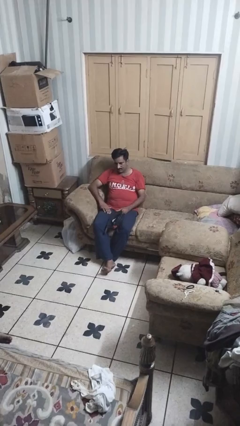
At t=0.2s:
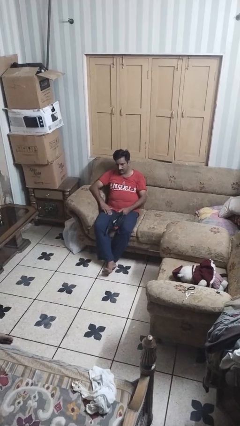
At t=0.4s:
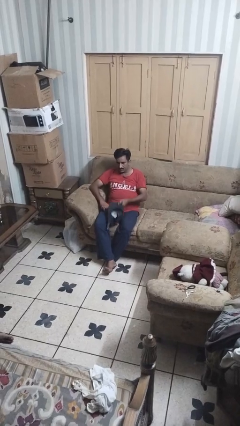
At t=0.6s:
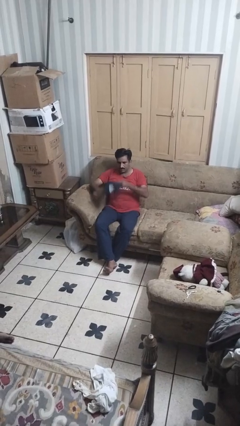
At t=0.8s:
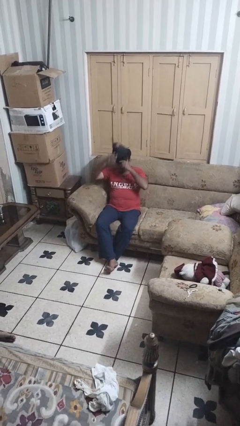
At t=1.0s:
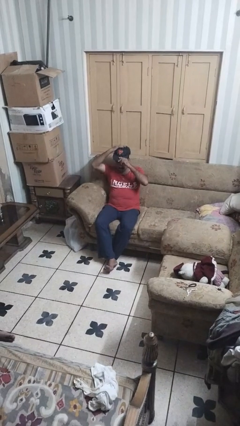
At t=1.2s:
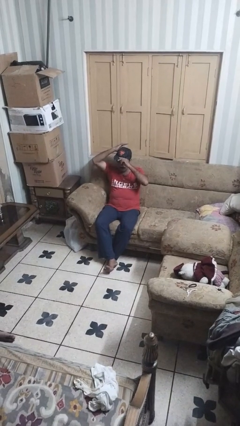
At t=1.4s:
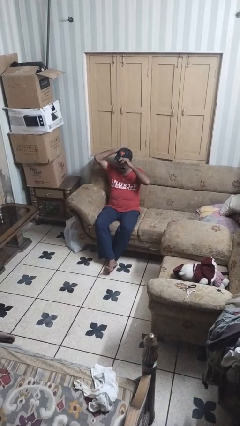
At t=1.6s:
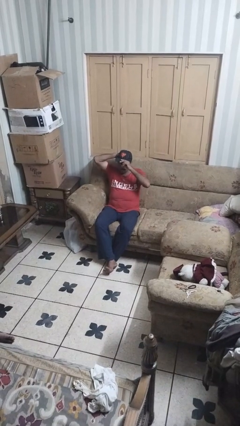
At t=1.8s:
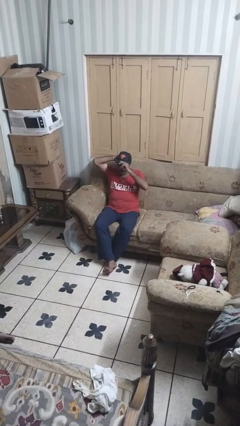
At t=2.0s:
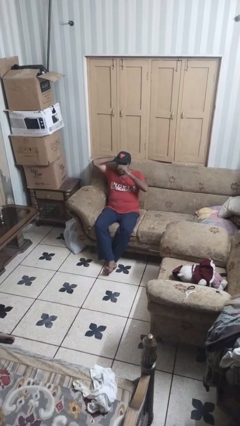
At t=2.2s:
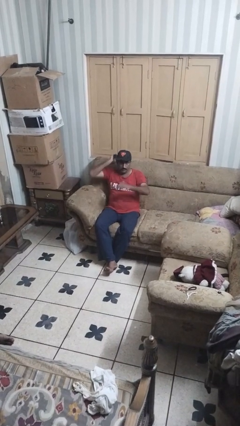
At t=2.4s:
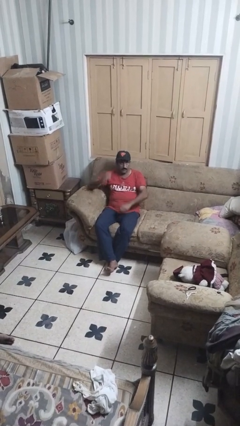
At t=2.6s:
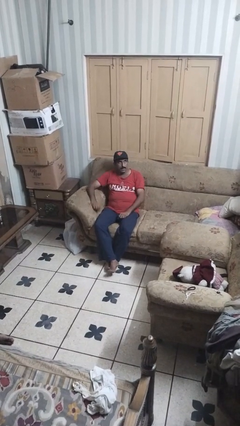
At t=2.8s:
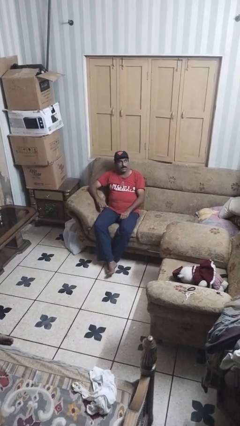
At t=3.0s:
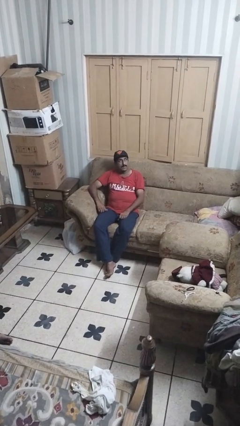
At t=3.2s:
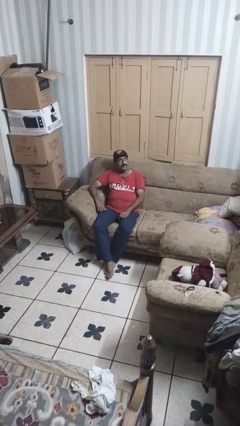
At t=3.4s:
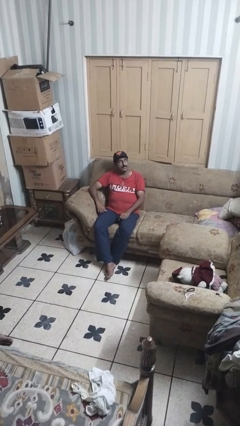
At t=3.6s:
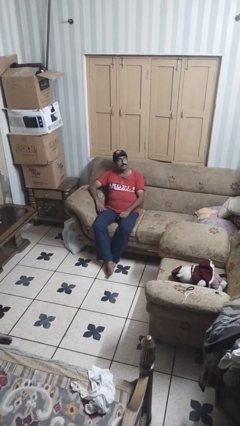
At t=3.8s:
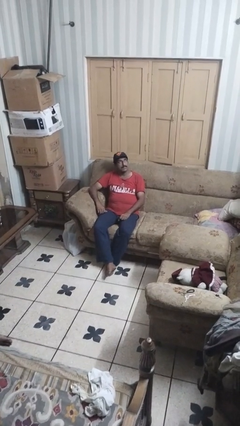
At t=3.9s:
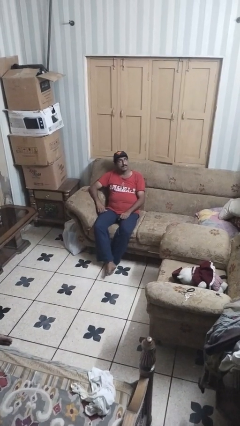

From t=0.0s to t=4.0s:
person puts on hat

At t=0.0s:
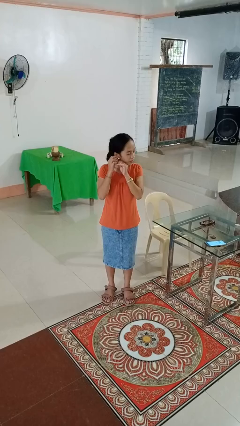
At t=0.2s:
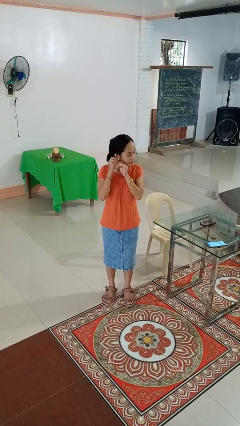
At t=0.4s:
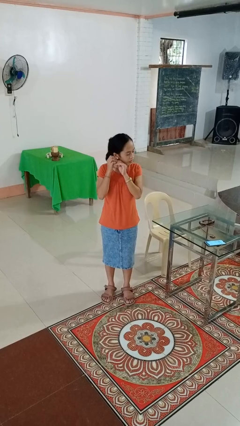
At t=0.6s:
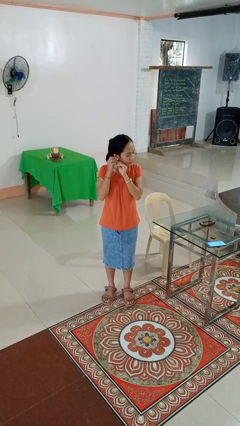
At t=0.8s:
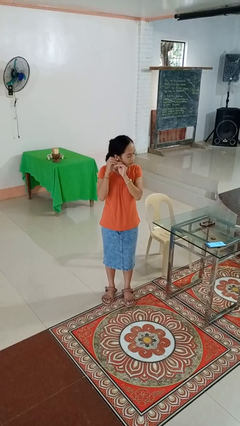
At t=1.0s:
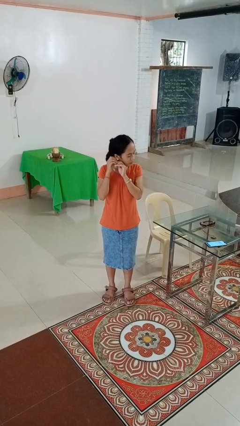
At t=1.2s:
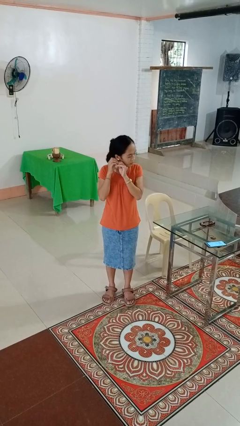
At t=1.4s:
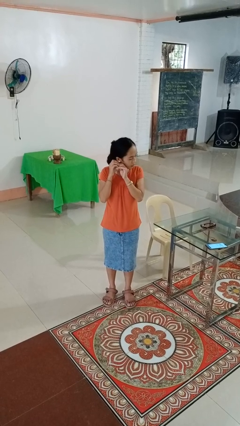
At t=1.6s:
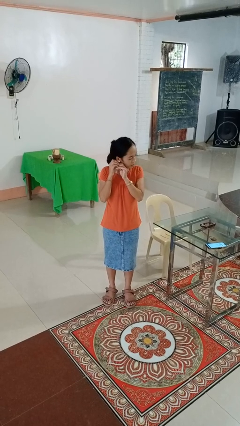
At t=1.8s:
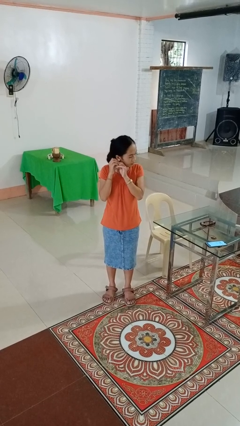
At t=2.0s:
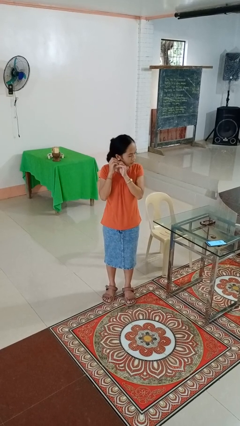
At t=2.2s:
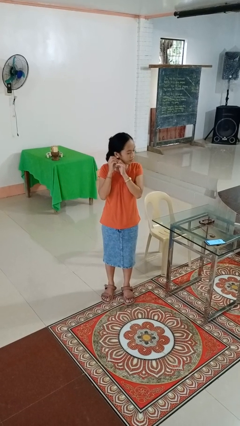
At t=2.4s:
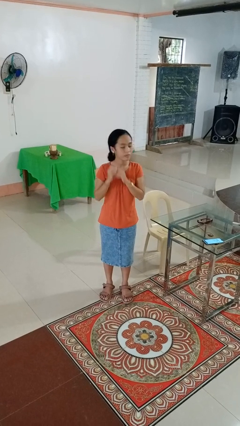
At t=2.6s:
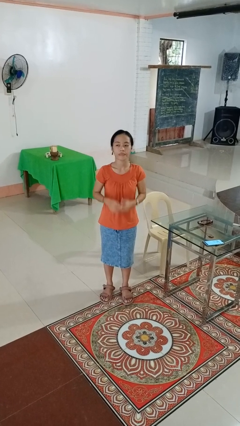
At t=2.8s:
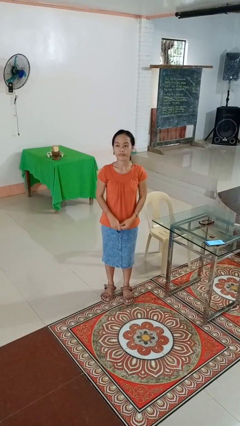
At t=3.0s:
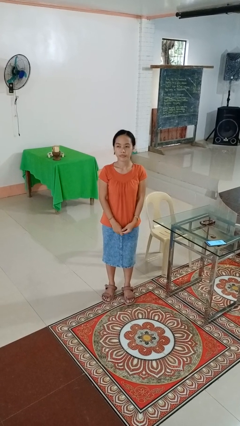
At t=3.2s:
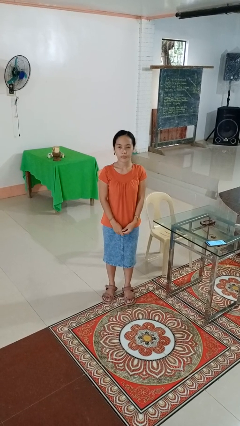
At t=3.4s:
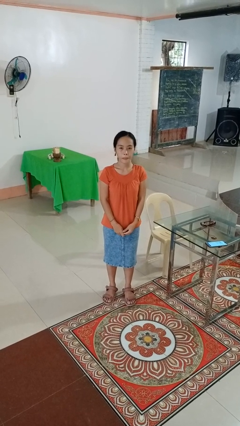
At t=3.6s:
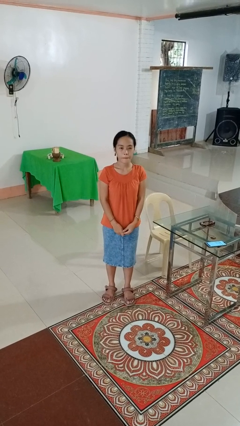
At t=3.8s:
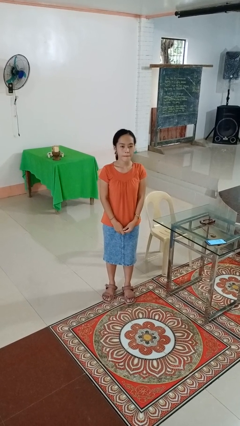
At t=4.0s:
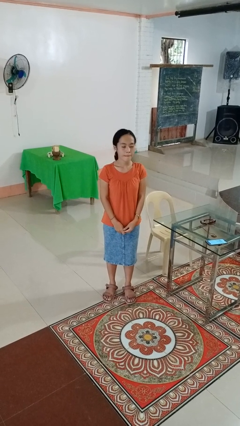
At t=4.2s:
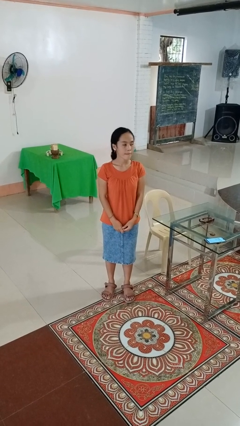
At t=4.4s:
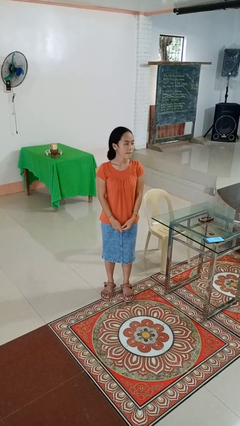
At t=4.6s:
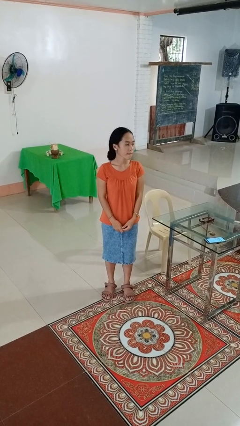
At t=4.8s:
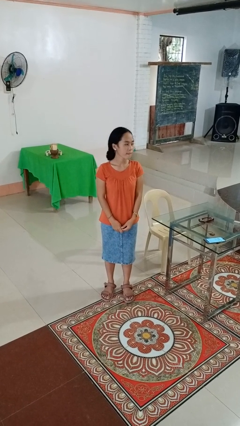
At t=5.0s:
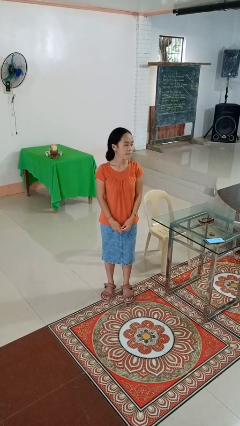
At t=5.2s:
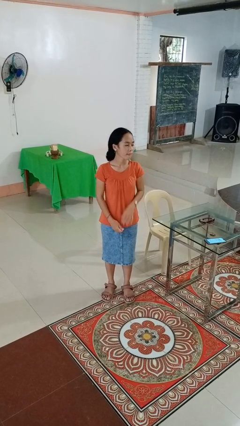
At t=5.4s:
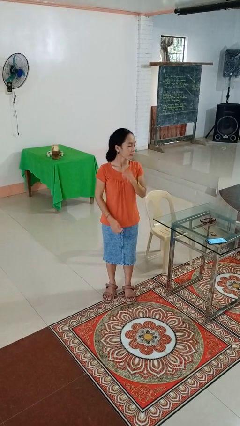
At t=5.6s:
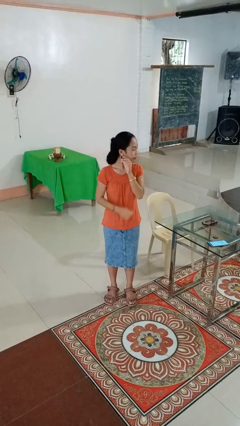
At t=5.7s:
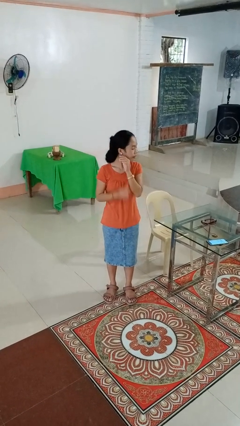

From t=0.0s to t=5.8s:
person puts on earrings

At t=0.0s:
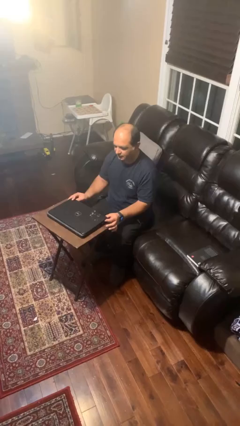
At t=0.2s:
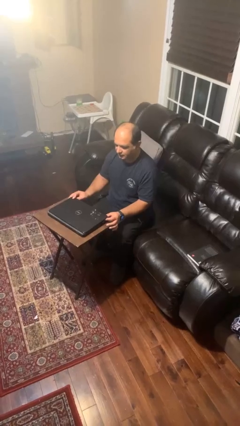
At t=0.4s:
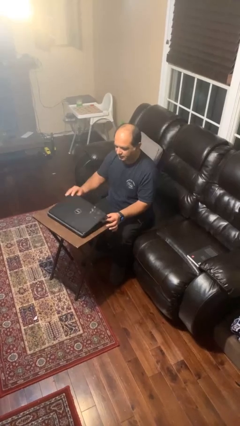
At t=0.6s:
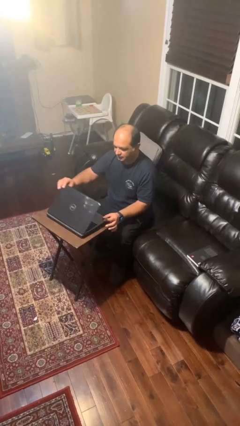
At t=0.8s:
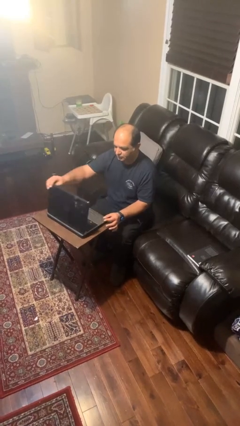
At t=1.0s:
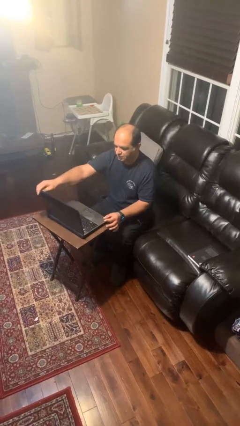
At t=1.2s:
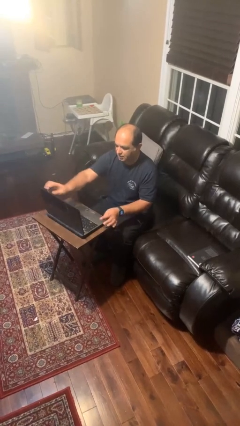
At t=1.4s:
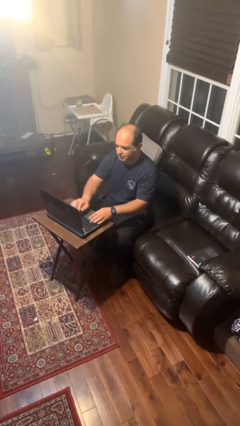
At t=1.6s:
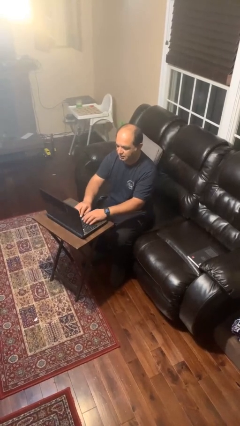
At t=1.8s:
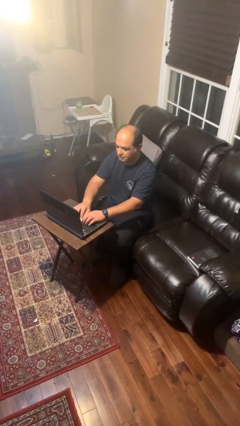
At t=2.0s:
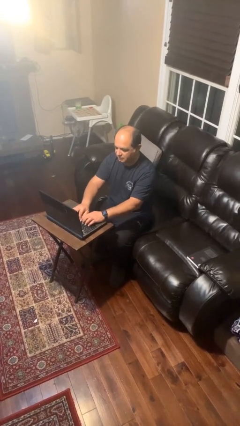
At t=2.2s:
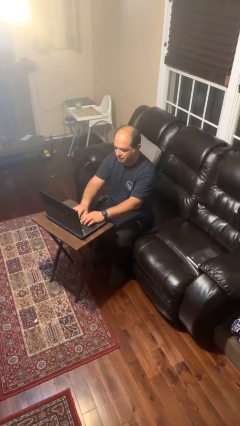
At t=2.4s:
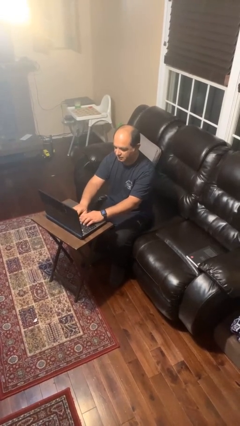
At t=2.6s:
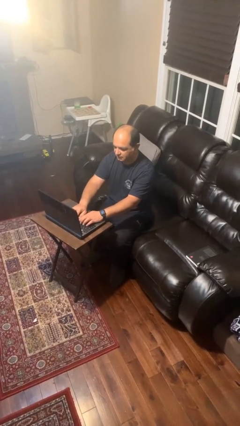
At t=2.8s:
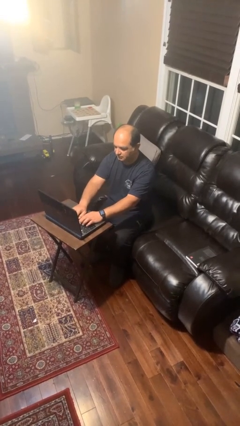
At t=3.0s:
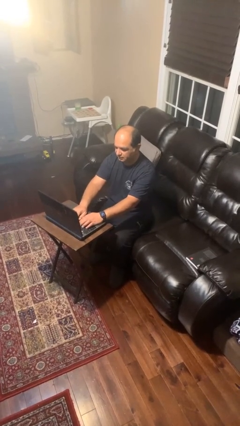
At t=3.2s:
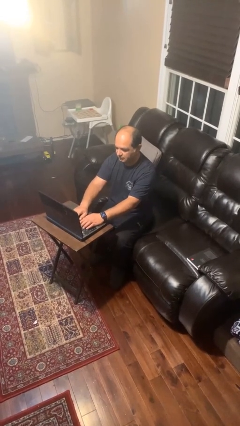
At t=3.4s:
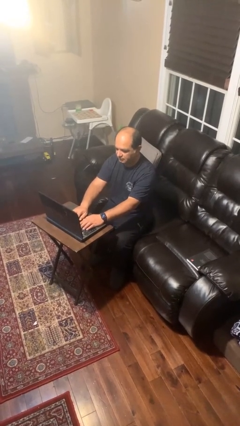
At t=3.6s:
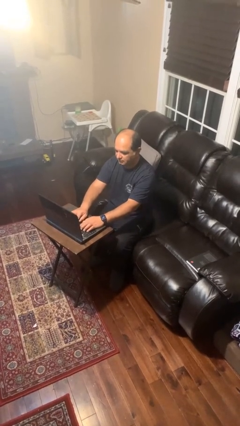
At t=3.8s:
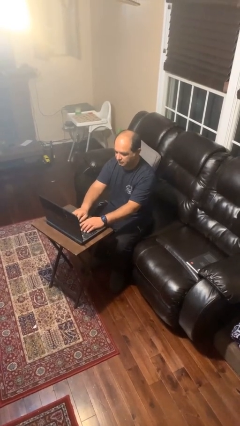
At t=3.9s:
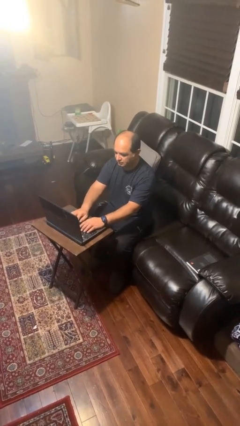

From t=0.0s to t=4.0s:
person interacts with laptop

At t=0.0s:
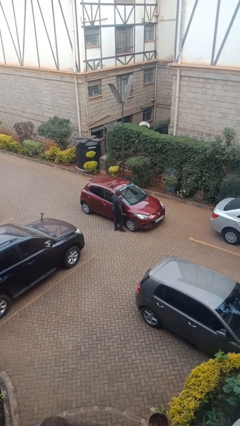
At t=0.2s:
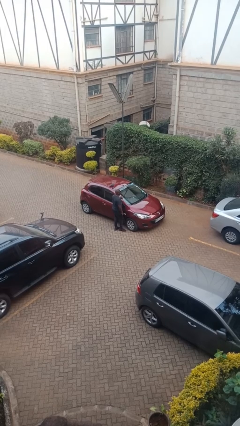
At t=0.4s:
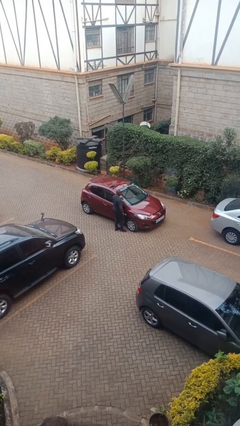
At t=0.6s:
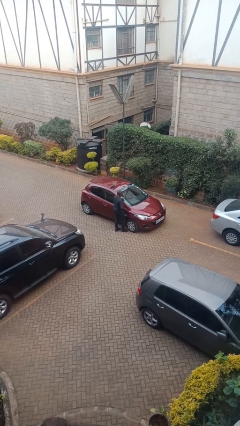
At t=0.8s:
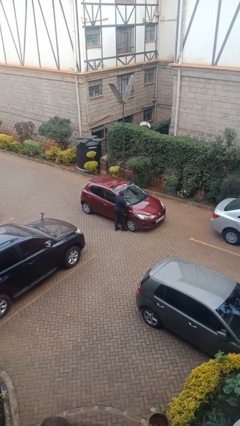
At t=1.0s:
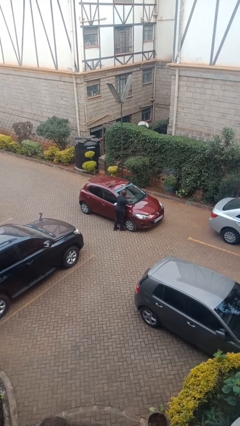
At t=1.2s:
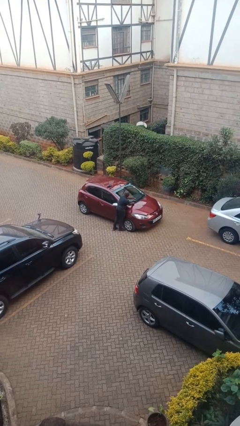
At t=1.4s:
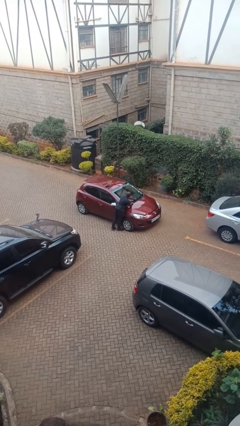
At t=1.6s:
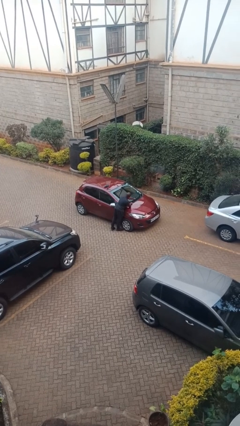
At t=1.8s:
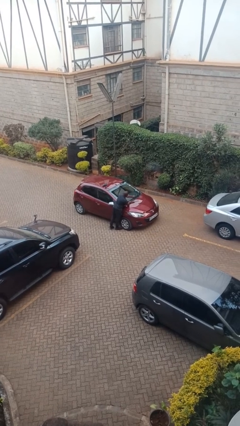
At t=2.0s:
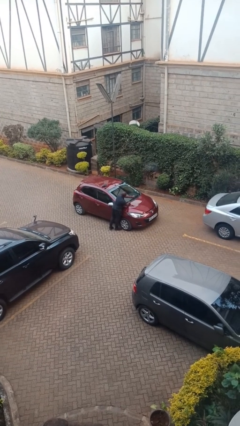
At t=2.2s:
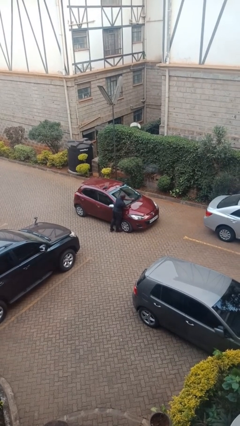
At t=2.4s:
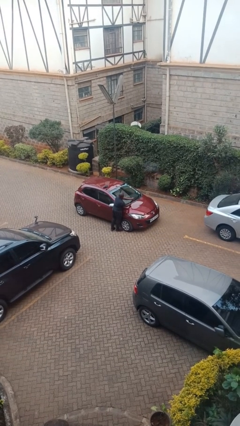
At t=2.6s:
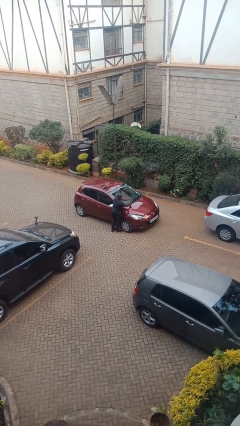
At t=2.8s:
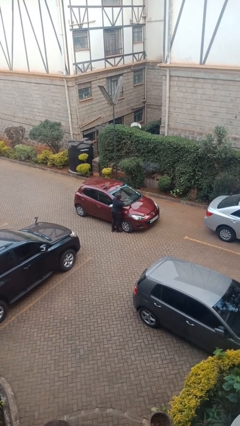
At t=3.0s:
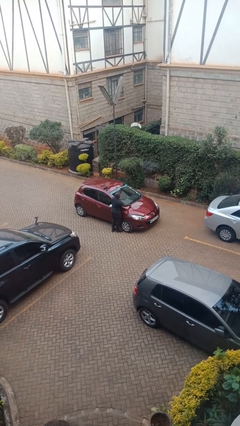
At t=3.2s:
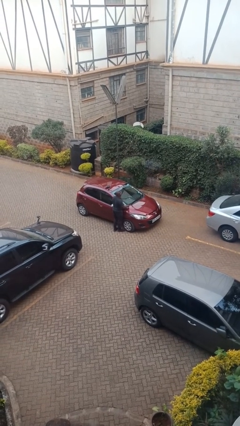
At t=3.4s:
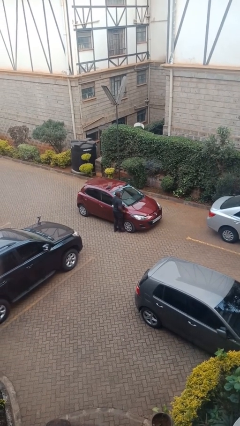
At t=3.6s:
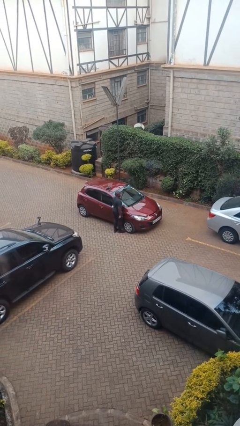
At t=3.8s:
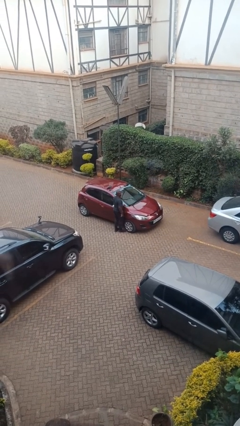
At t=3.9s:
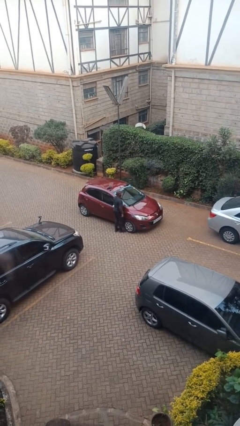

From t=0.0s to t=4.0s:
person flips up car wipers
